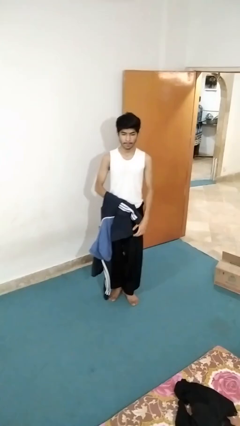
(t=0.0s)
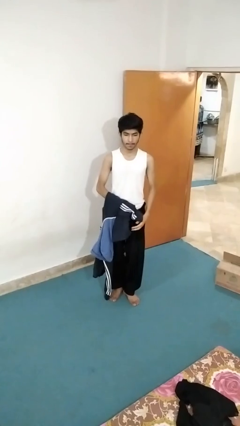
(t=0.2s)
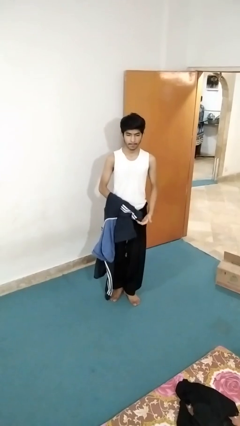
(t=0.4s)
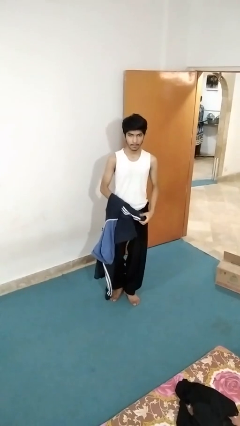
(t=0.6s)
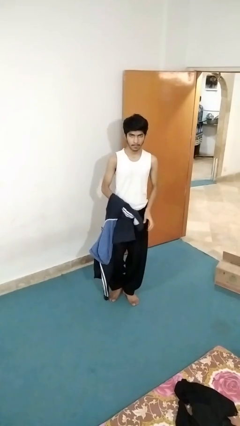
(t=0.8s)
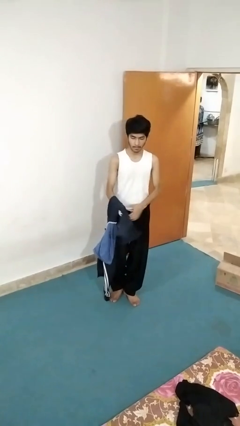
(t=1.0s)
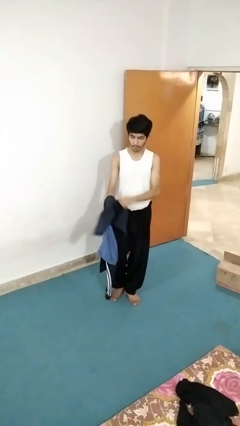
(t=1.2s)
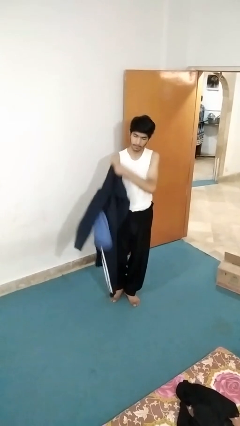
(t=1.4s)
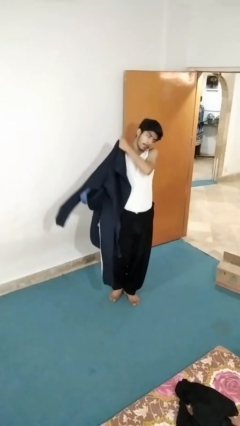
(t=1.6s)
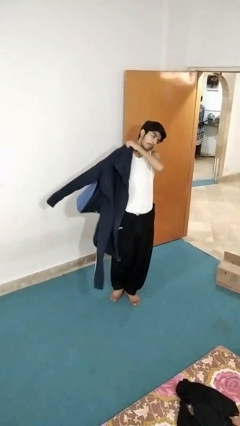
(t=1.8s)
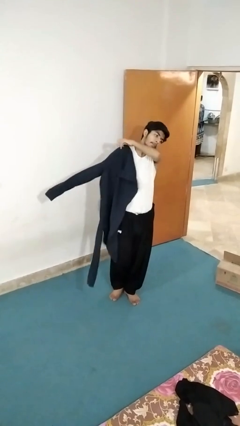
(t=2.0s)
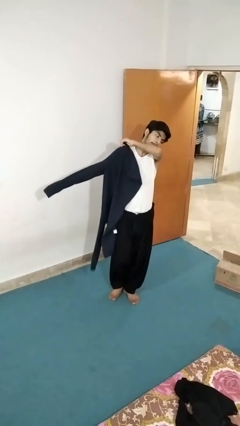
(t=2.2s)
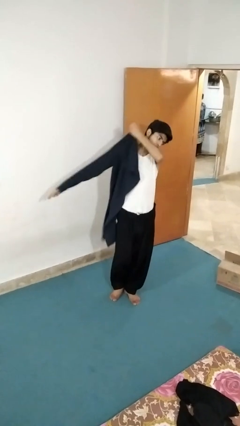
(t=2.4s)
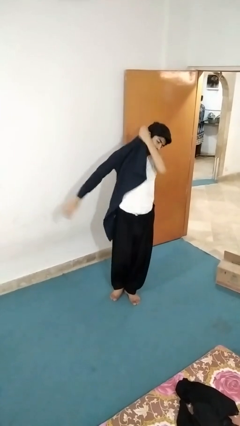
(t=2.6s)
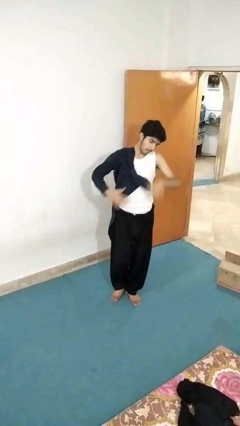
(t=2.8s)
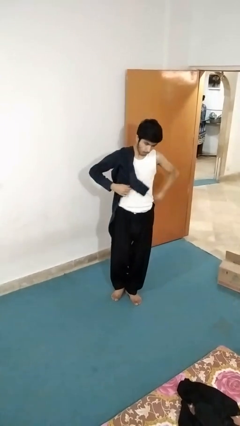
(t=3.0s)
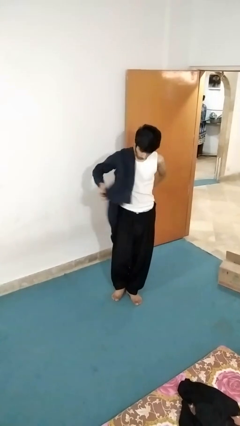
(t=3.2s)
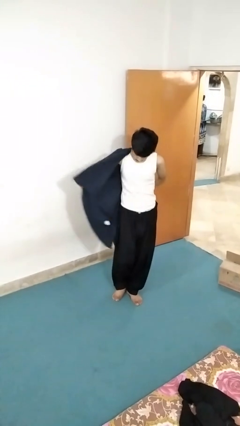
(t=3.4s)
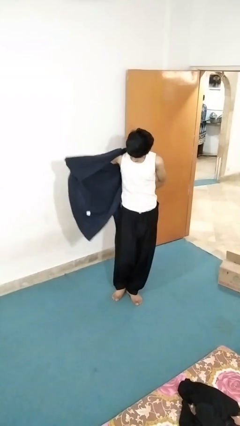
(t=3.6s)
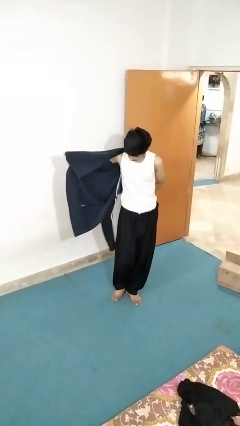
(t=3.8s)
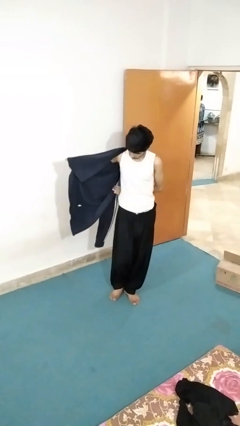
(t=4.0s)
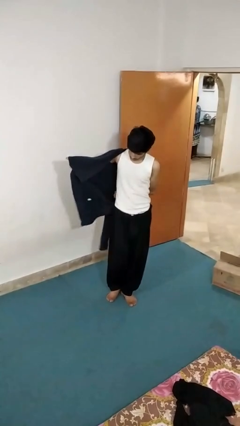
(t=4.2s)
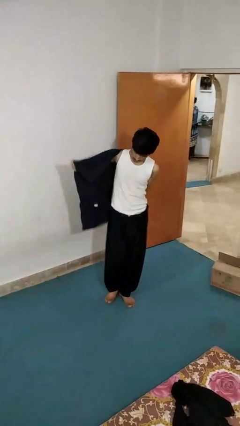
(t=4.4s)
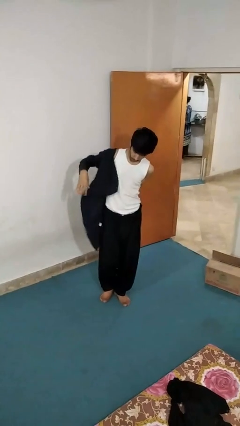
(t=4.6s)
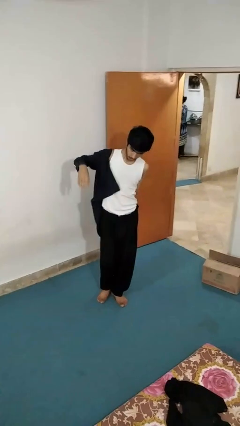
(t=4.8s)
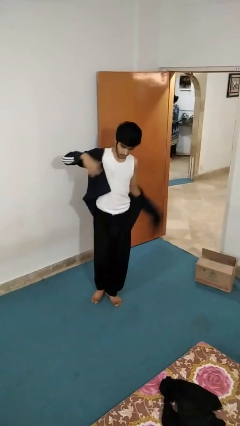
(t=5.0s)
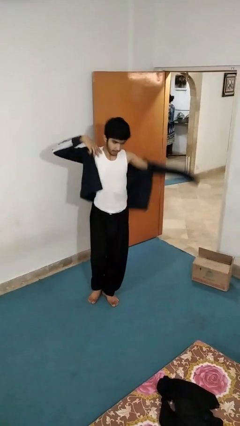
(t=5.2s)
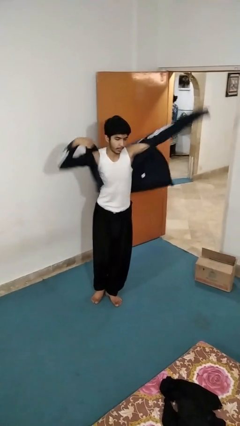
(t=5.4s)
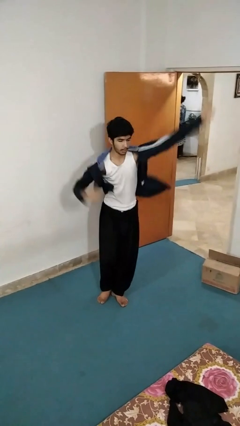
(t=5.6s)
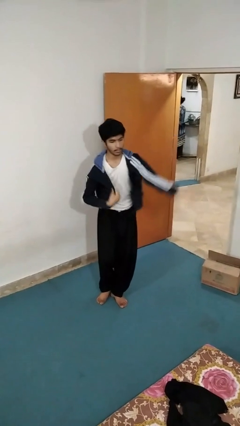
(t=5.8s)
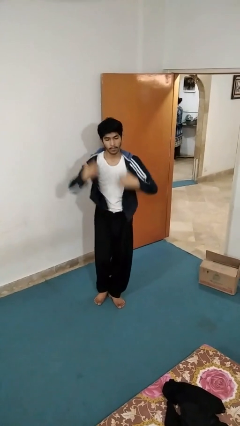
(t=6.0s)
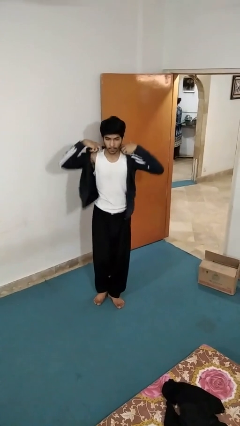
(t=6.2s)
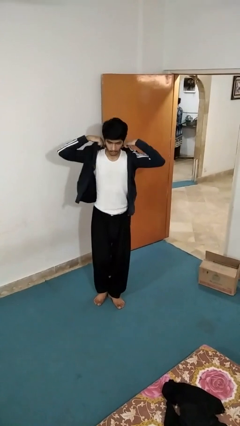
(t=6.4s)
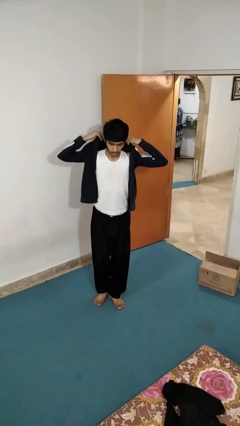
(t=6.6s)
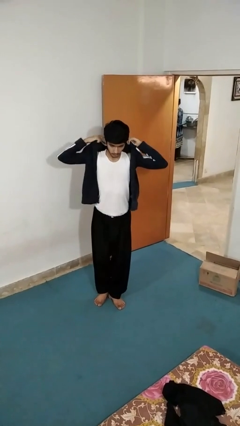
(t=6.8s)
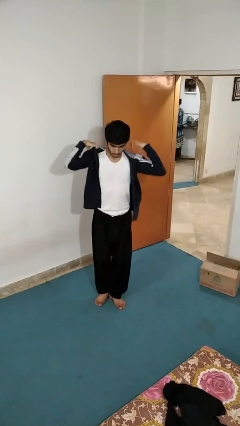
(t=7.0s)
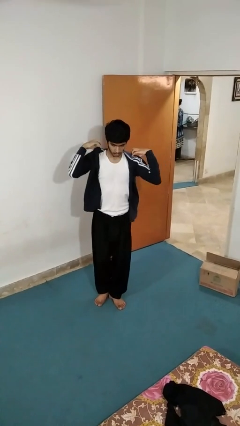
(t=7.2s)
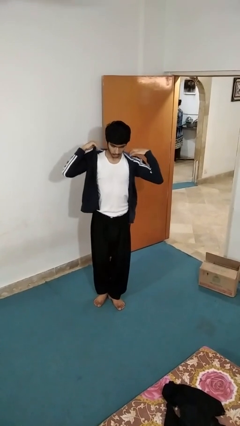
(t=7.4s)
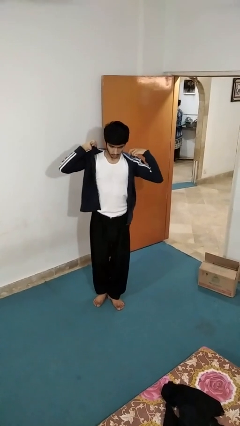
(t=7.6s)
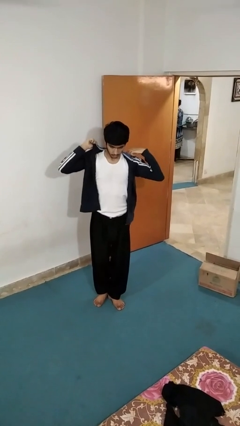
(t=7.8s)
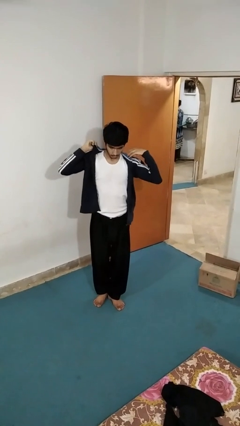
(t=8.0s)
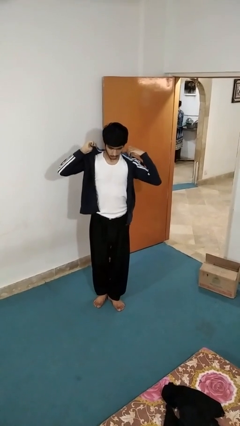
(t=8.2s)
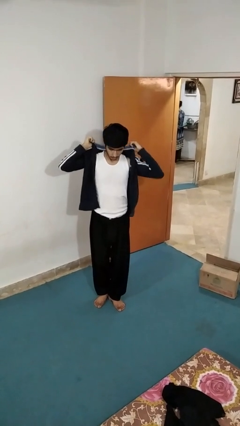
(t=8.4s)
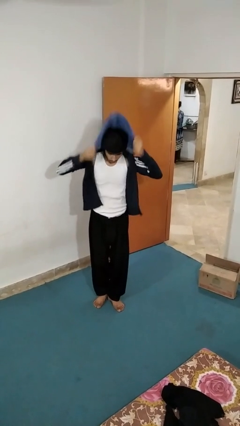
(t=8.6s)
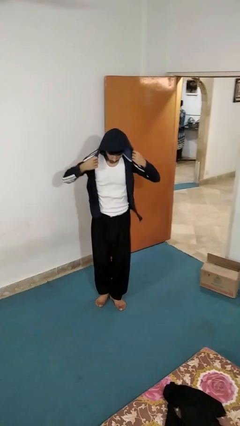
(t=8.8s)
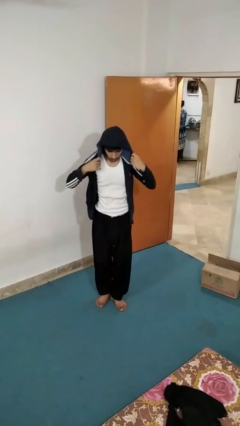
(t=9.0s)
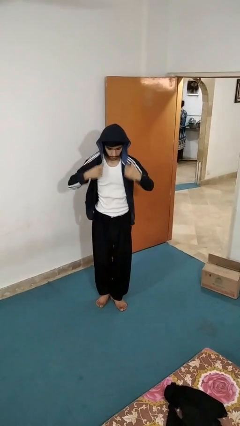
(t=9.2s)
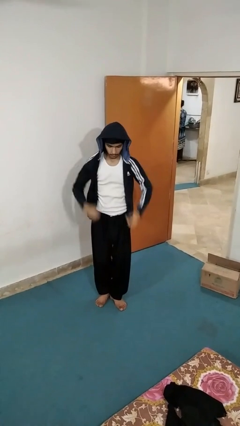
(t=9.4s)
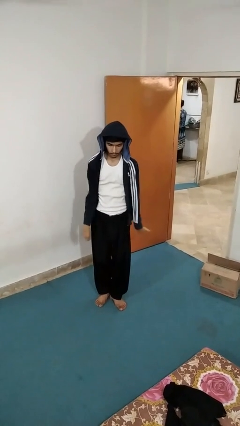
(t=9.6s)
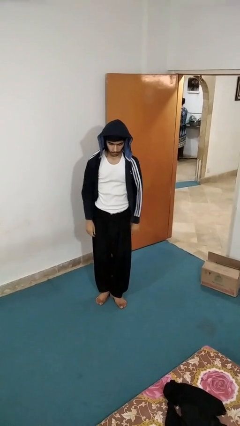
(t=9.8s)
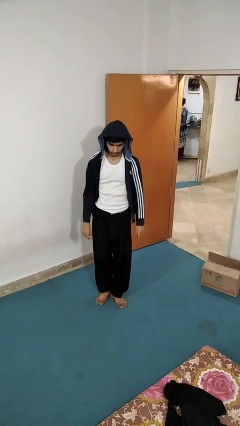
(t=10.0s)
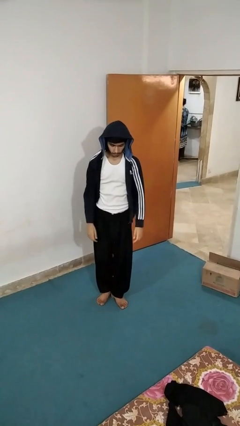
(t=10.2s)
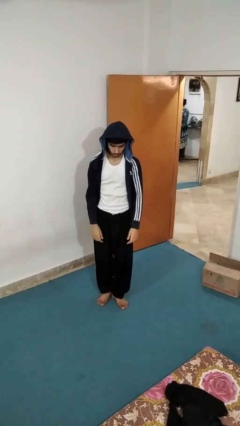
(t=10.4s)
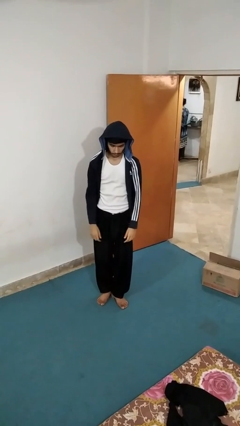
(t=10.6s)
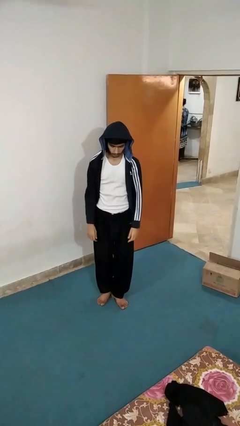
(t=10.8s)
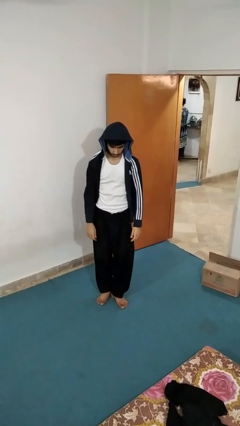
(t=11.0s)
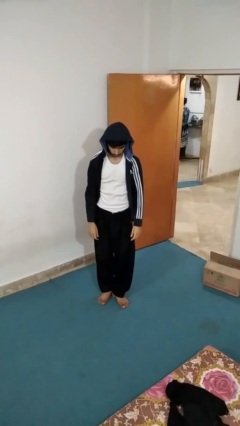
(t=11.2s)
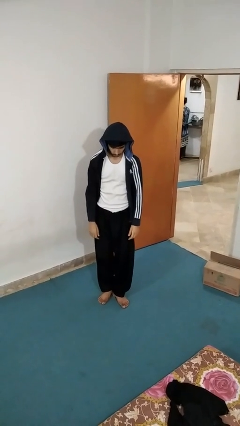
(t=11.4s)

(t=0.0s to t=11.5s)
person puts on hoodie

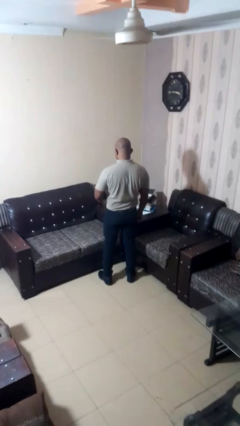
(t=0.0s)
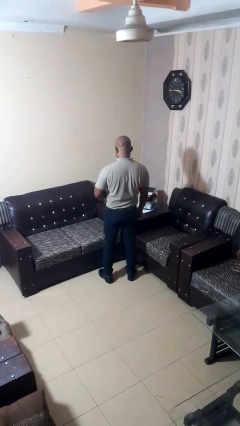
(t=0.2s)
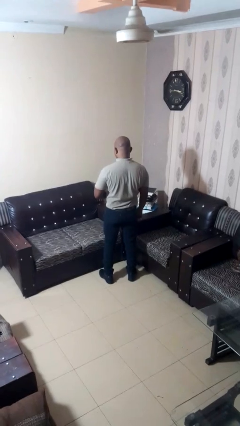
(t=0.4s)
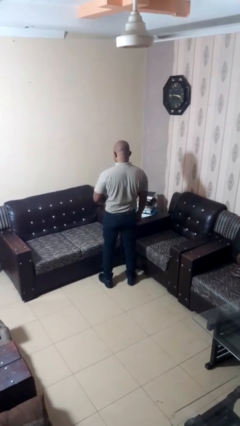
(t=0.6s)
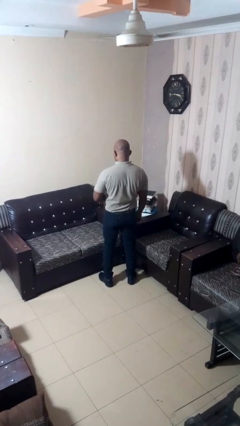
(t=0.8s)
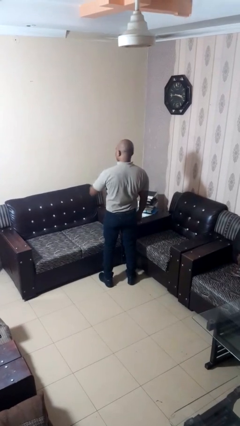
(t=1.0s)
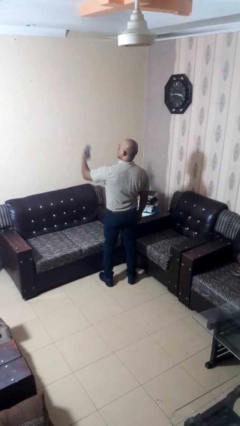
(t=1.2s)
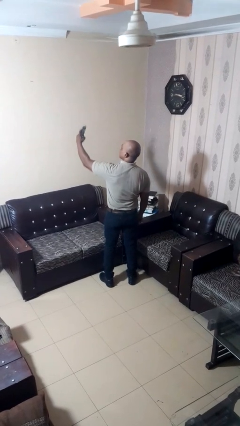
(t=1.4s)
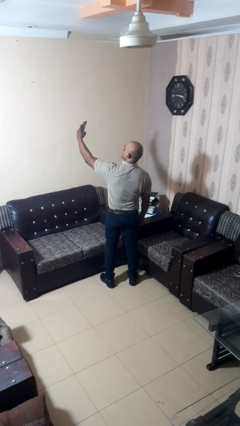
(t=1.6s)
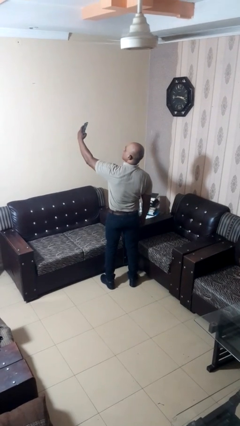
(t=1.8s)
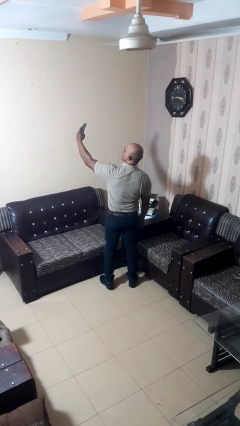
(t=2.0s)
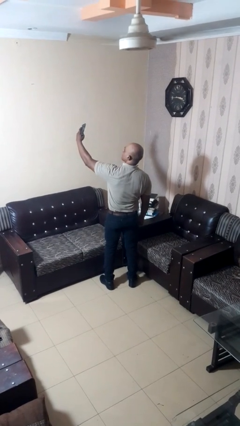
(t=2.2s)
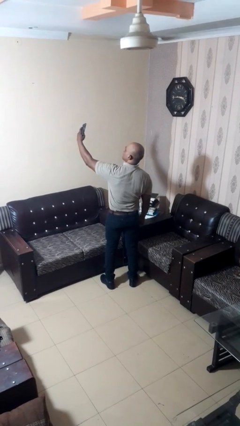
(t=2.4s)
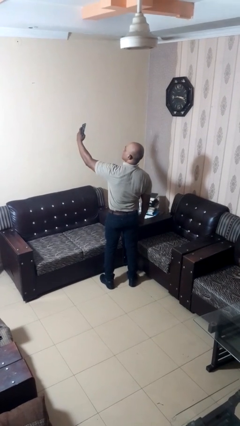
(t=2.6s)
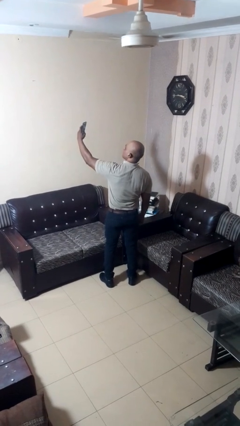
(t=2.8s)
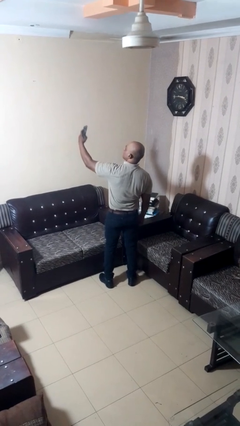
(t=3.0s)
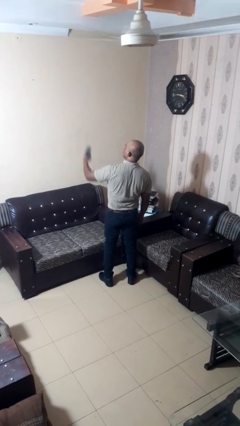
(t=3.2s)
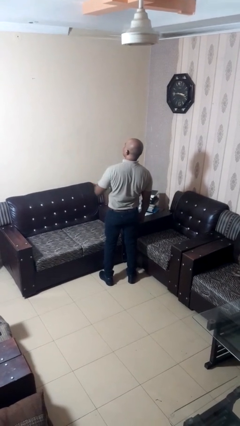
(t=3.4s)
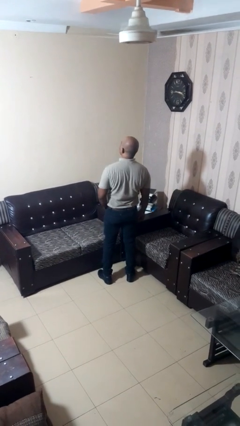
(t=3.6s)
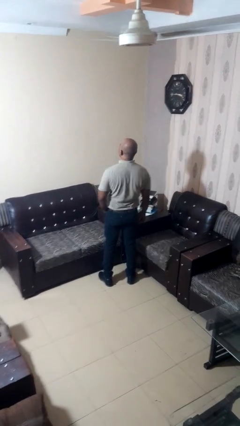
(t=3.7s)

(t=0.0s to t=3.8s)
person takes selfie

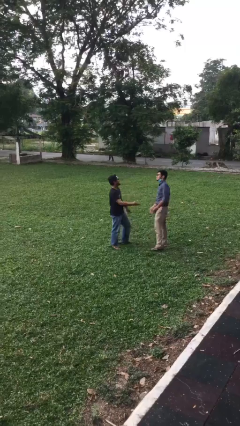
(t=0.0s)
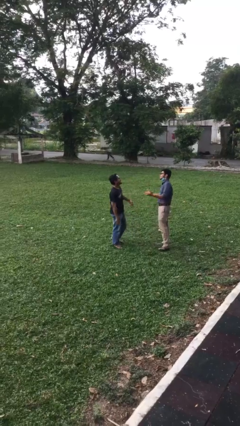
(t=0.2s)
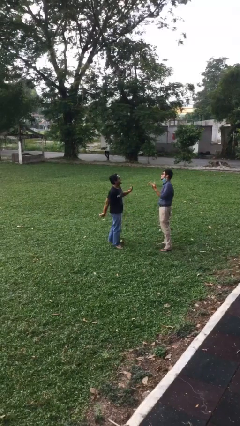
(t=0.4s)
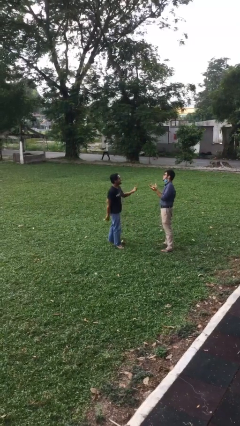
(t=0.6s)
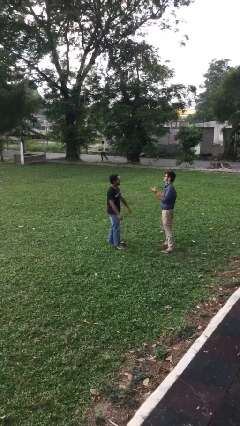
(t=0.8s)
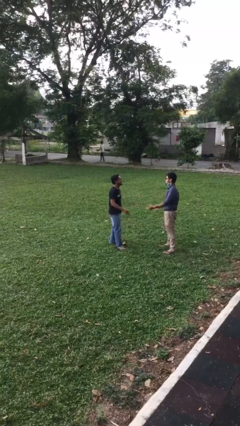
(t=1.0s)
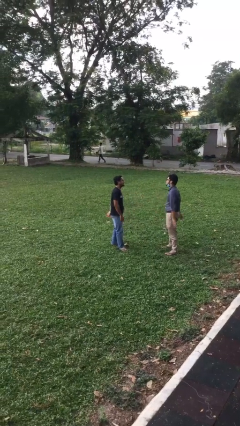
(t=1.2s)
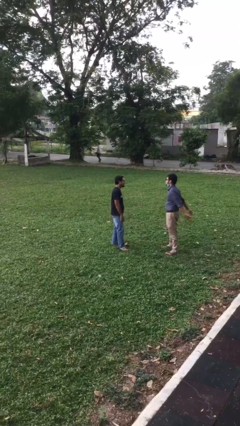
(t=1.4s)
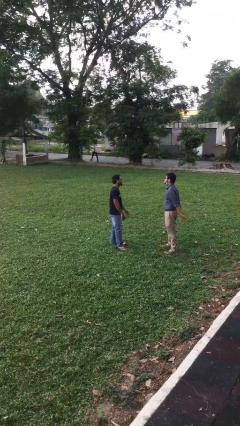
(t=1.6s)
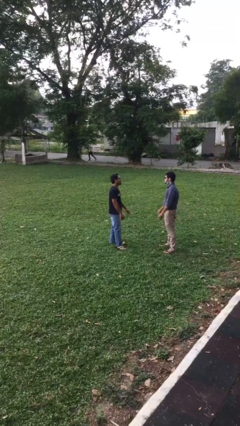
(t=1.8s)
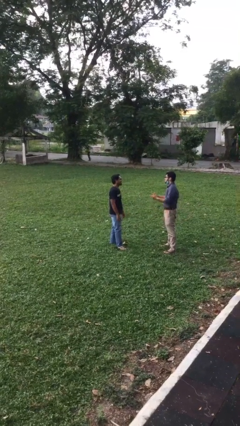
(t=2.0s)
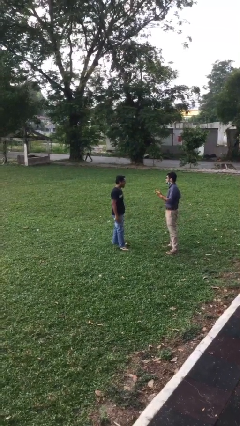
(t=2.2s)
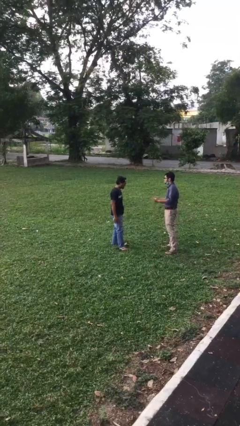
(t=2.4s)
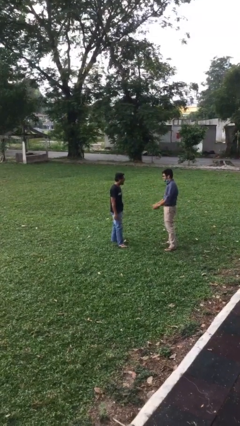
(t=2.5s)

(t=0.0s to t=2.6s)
person talks to person

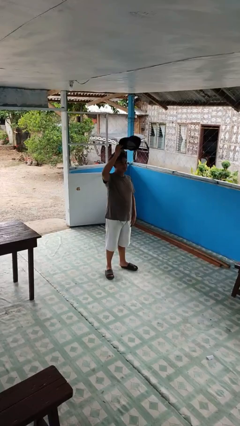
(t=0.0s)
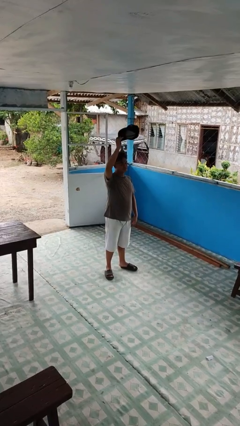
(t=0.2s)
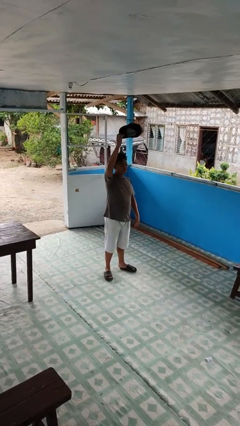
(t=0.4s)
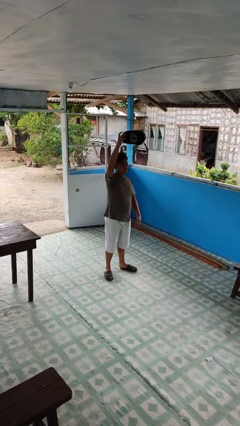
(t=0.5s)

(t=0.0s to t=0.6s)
person drops object
